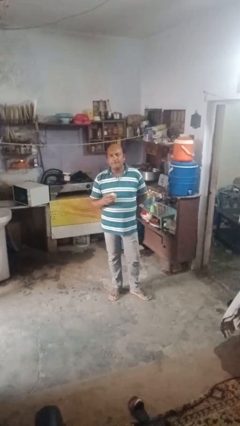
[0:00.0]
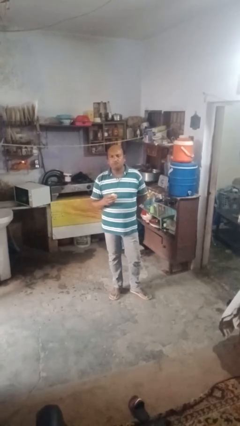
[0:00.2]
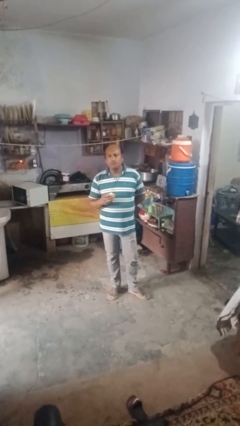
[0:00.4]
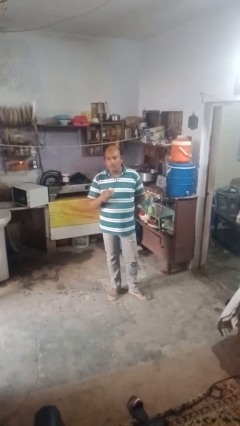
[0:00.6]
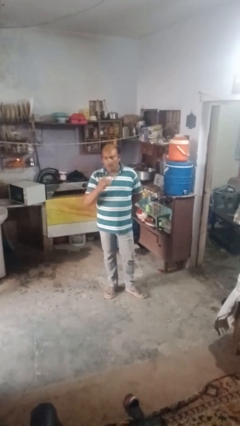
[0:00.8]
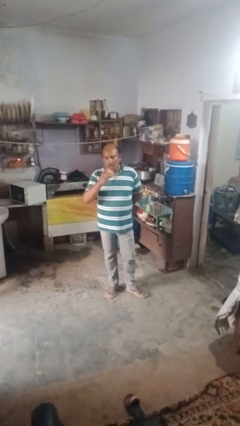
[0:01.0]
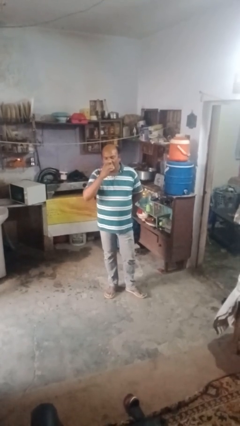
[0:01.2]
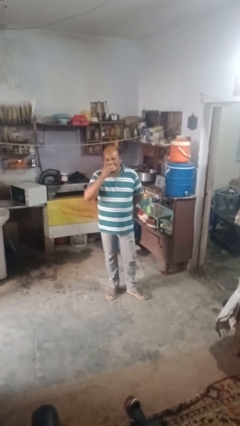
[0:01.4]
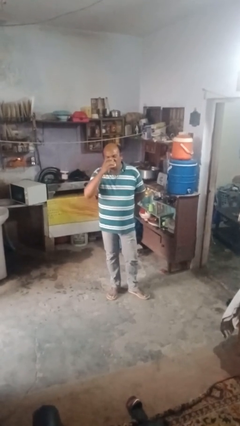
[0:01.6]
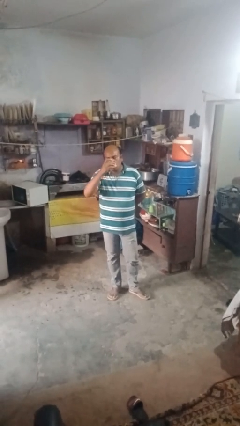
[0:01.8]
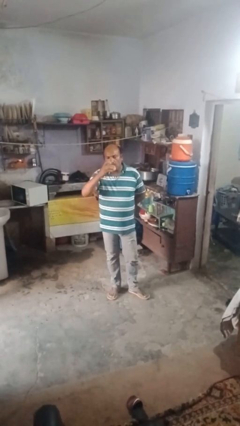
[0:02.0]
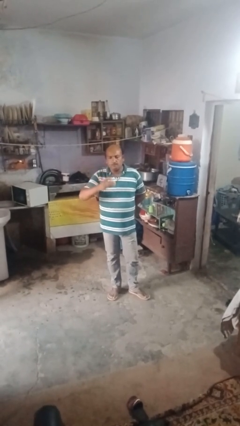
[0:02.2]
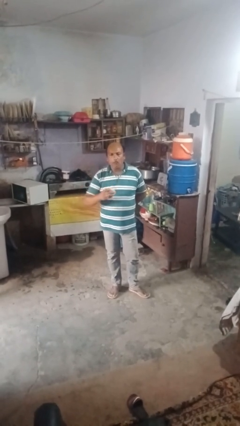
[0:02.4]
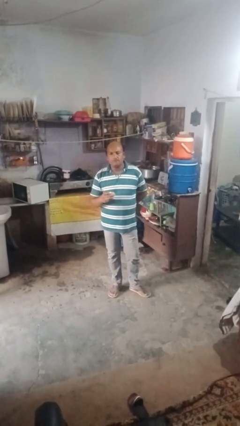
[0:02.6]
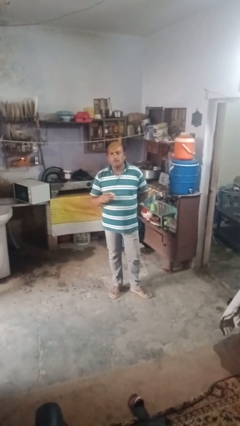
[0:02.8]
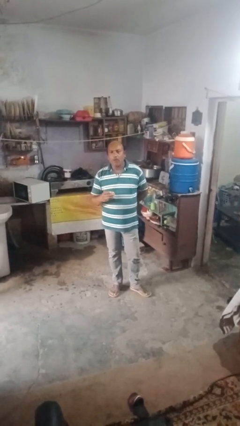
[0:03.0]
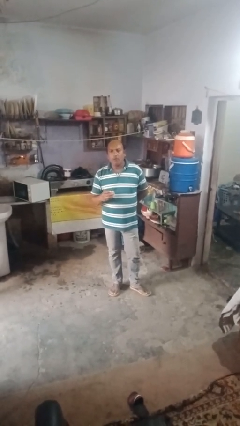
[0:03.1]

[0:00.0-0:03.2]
person eats apple

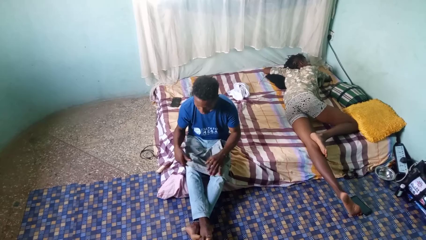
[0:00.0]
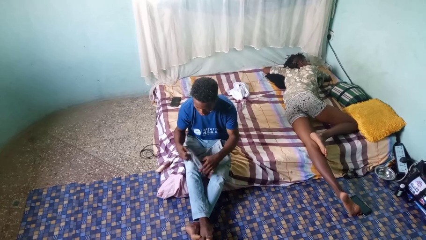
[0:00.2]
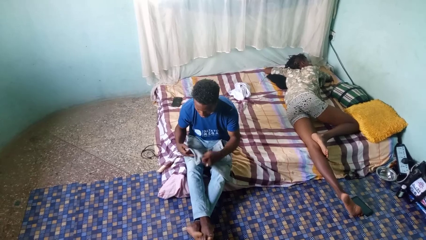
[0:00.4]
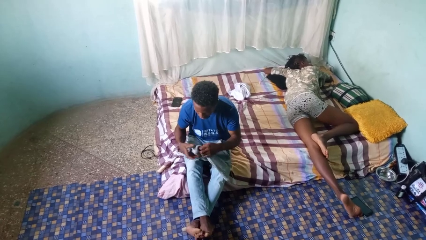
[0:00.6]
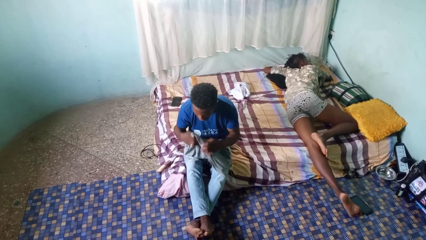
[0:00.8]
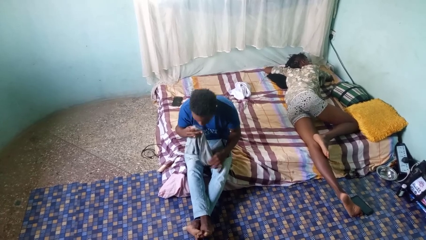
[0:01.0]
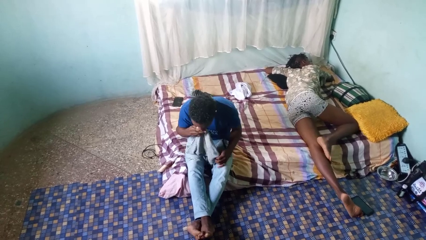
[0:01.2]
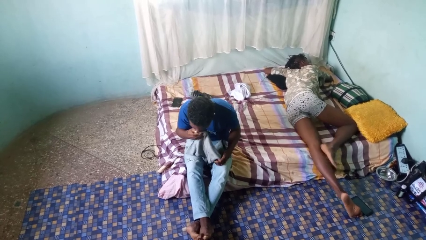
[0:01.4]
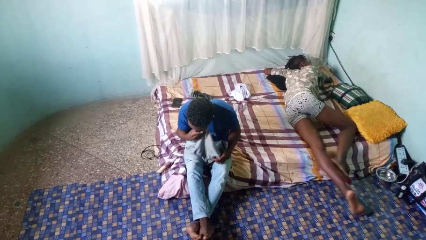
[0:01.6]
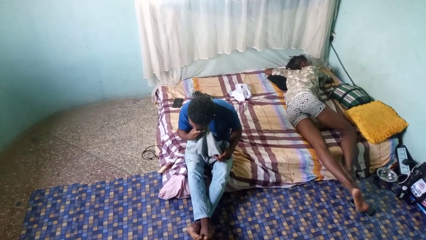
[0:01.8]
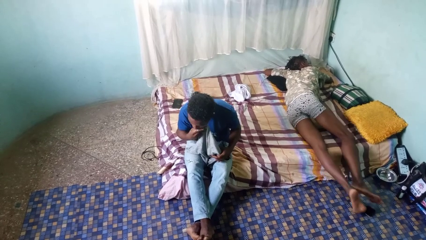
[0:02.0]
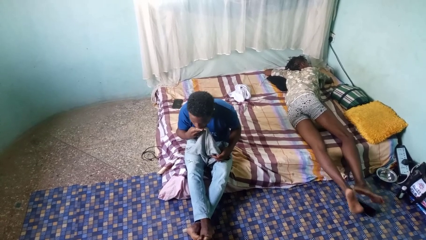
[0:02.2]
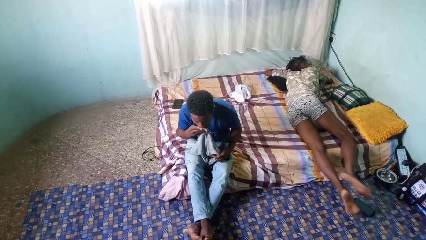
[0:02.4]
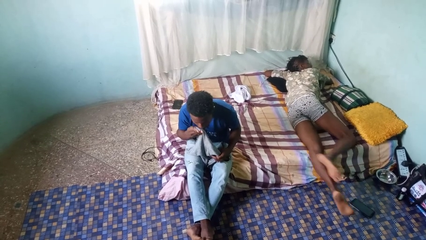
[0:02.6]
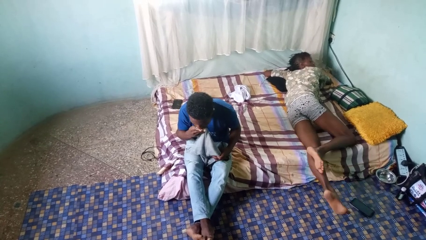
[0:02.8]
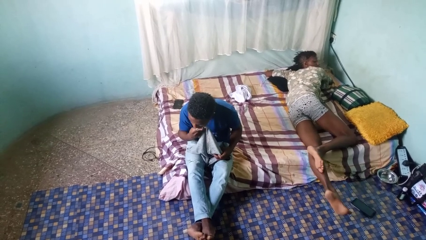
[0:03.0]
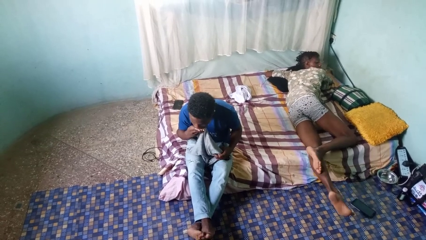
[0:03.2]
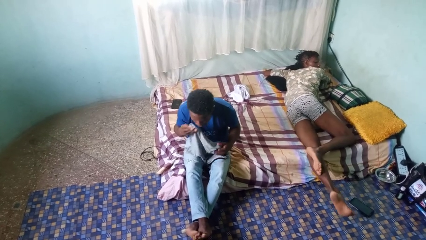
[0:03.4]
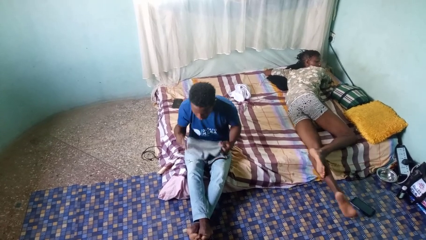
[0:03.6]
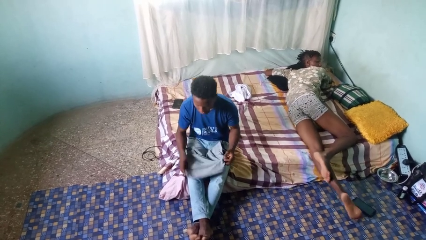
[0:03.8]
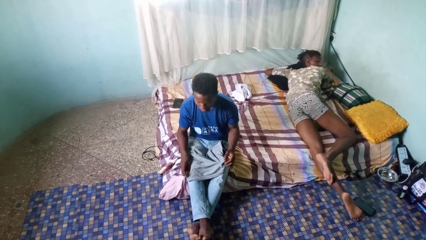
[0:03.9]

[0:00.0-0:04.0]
person wipes mouth with napkin

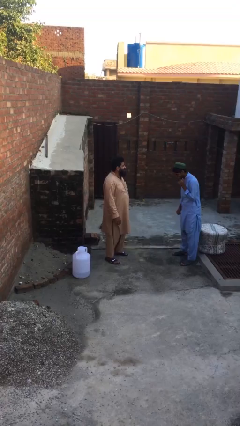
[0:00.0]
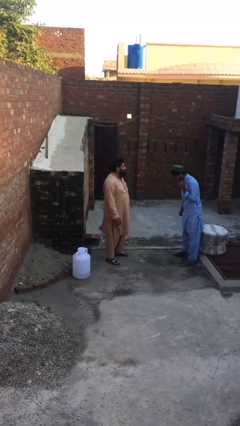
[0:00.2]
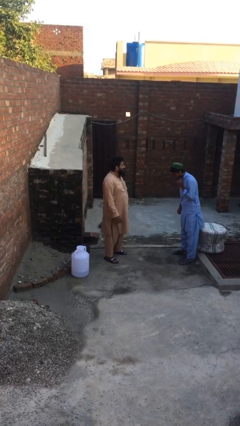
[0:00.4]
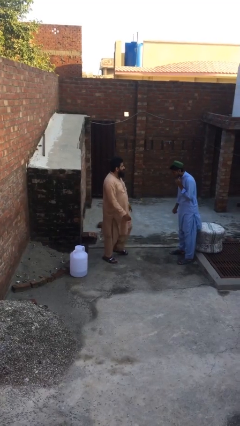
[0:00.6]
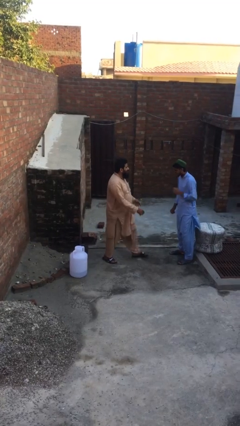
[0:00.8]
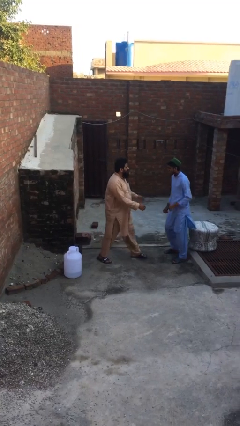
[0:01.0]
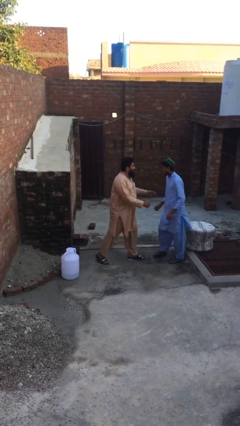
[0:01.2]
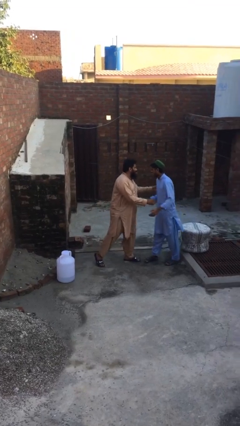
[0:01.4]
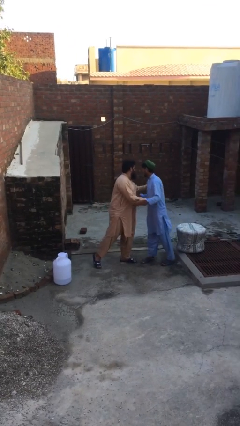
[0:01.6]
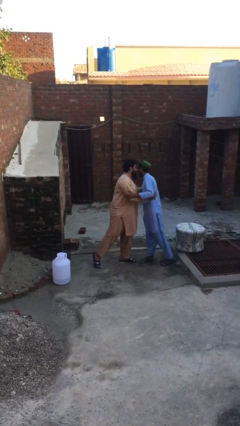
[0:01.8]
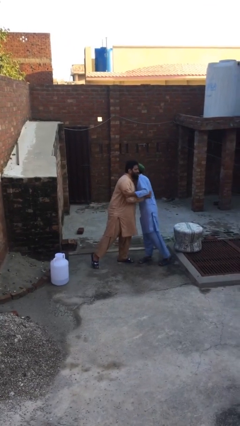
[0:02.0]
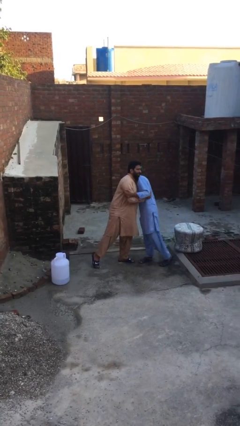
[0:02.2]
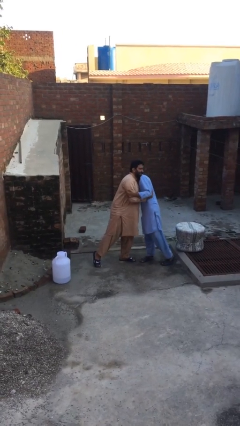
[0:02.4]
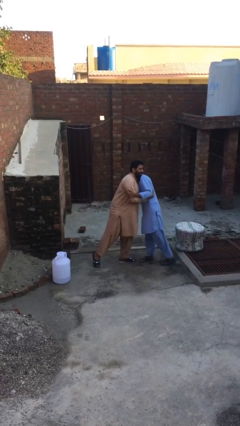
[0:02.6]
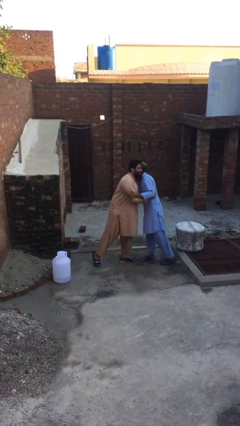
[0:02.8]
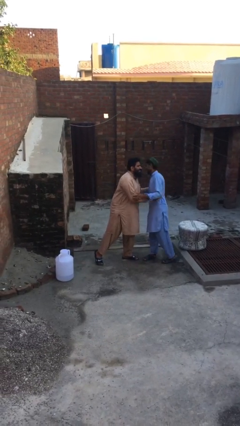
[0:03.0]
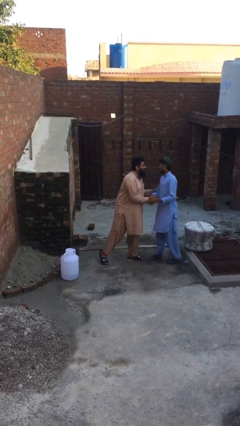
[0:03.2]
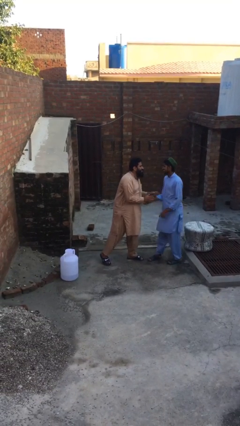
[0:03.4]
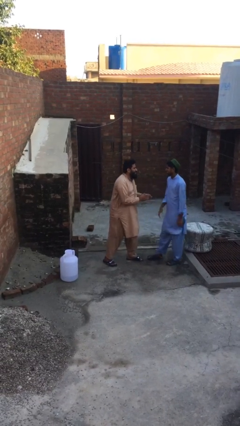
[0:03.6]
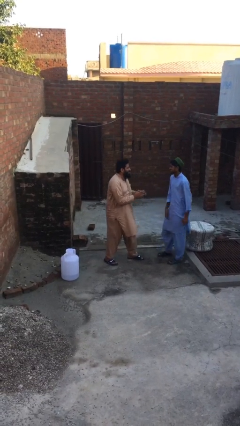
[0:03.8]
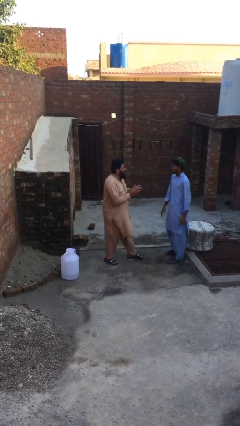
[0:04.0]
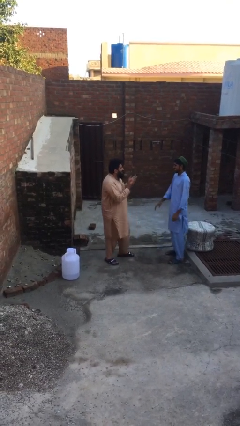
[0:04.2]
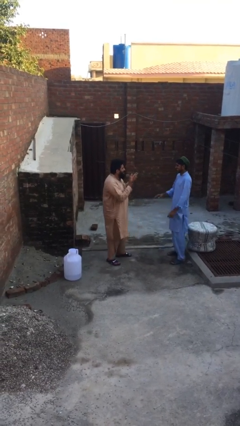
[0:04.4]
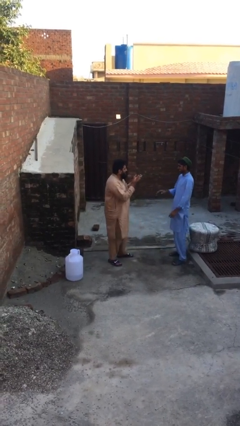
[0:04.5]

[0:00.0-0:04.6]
person embraces person

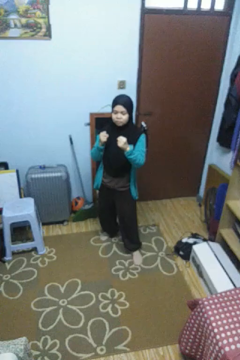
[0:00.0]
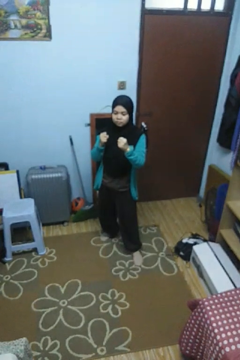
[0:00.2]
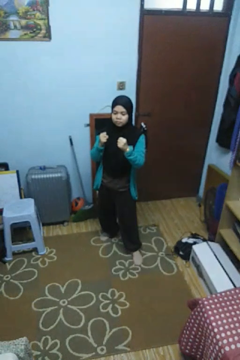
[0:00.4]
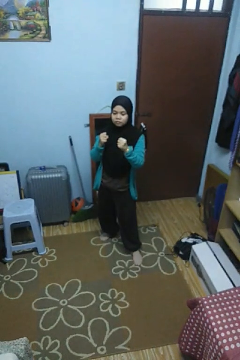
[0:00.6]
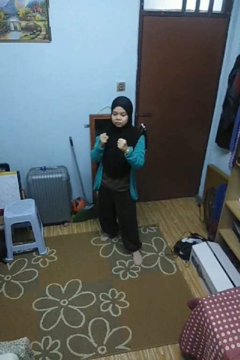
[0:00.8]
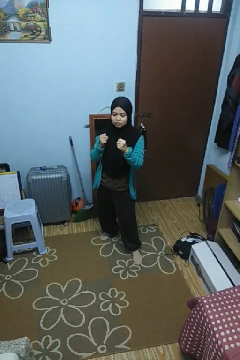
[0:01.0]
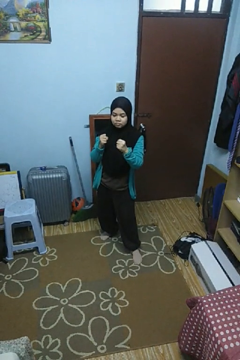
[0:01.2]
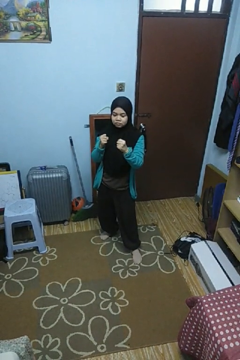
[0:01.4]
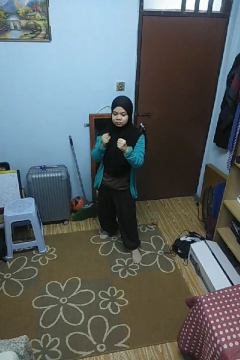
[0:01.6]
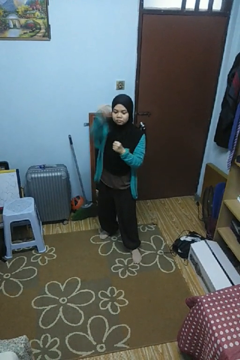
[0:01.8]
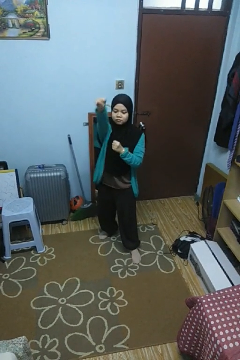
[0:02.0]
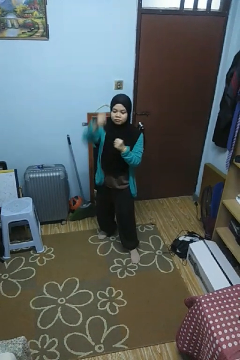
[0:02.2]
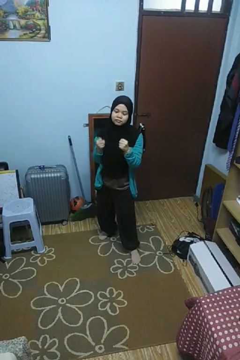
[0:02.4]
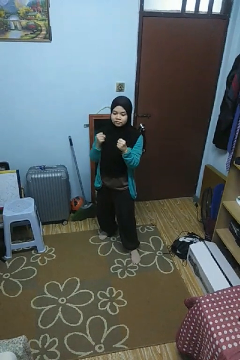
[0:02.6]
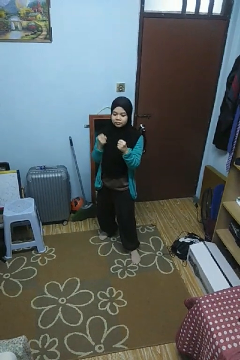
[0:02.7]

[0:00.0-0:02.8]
person punches

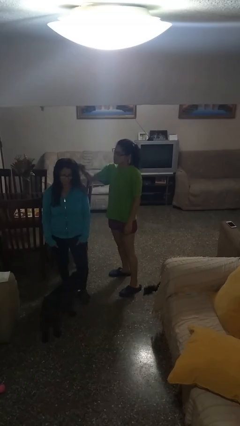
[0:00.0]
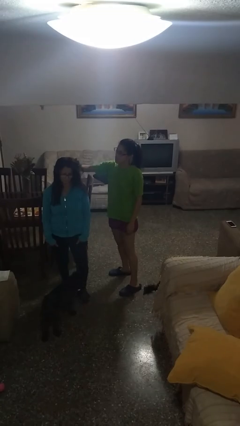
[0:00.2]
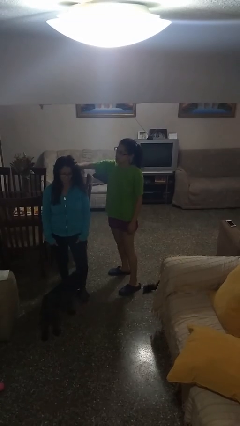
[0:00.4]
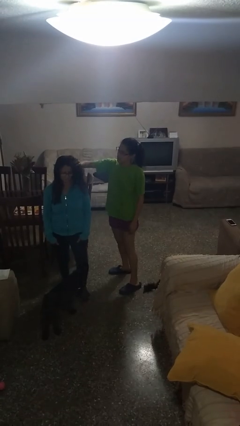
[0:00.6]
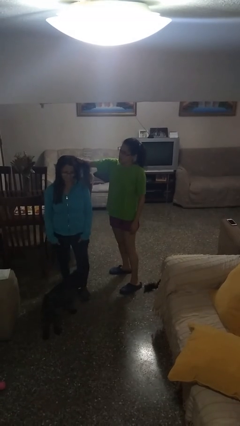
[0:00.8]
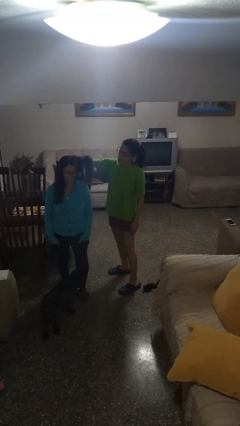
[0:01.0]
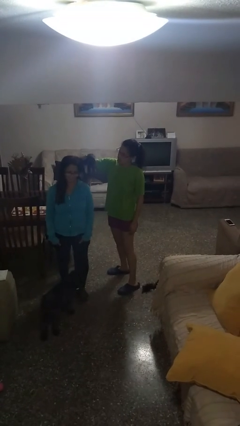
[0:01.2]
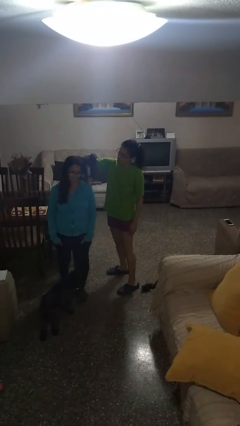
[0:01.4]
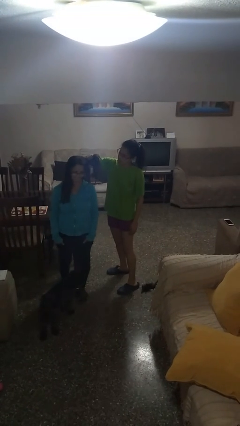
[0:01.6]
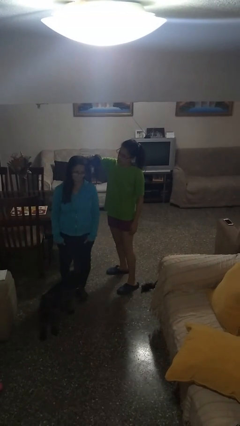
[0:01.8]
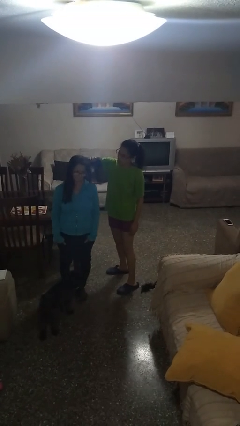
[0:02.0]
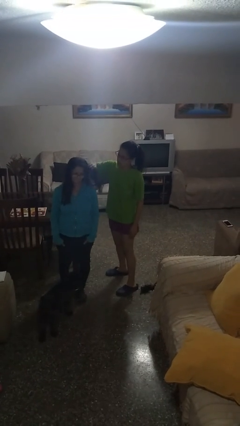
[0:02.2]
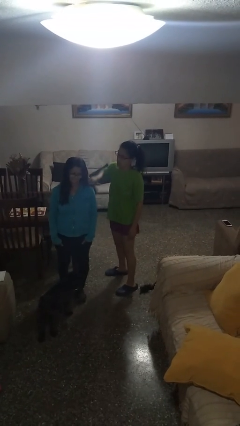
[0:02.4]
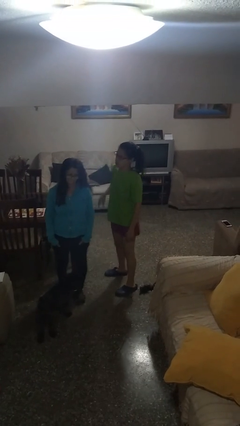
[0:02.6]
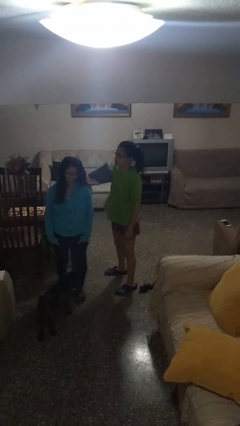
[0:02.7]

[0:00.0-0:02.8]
person grabs person by hair
